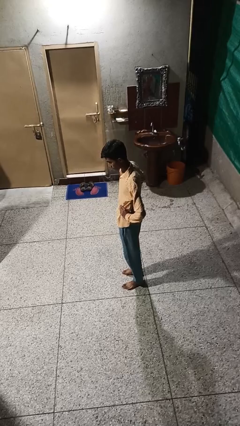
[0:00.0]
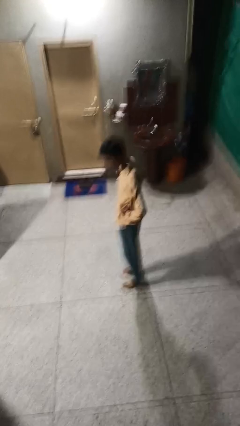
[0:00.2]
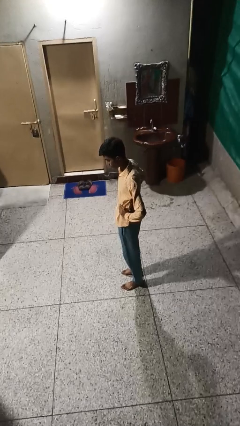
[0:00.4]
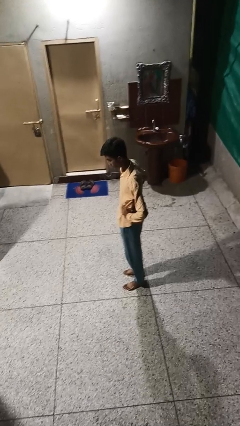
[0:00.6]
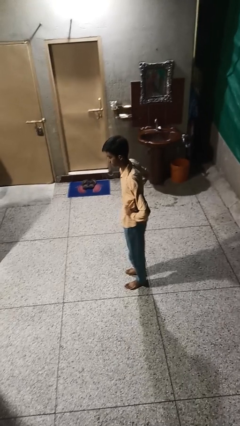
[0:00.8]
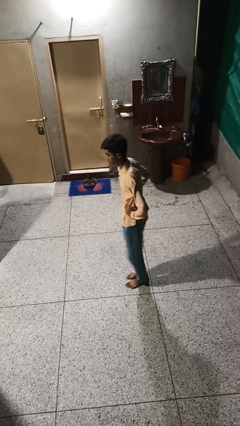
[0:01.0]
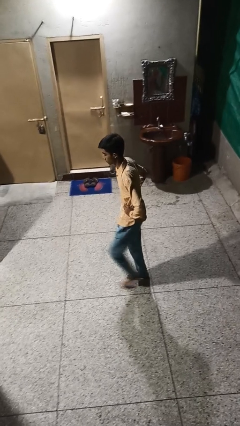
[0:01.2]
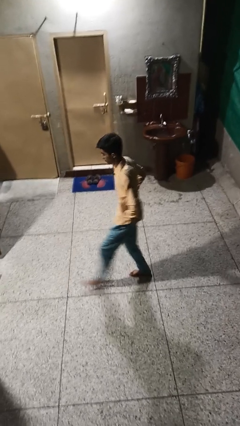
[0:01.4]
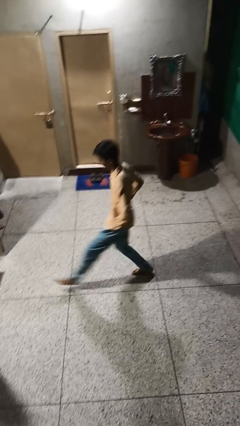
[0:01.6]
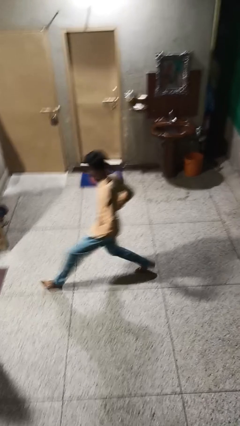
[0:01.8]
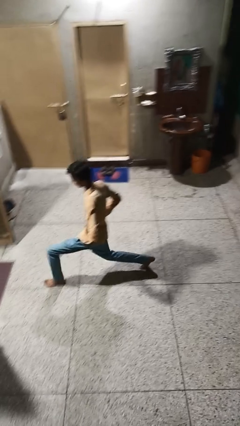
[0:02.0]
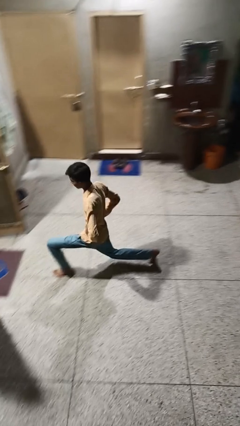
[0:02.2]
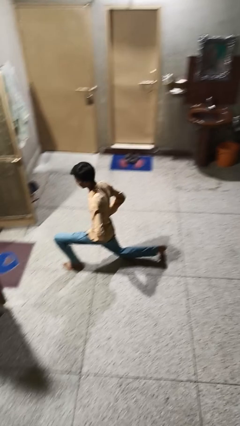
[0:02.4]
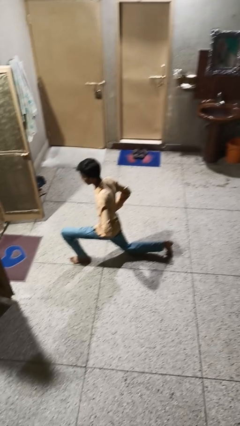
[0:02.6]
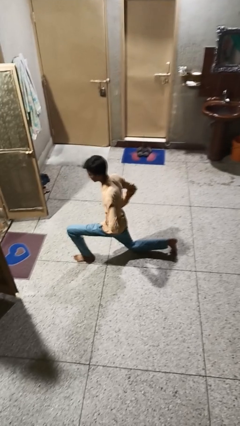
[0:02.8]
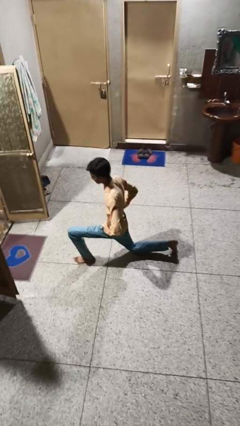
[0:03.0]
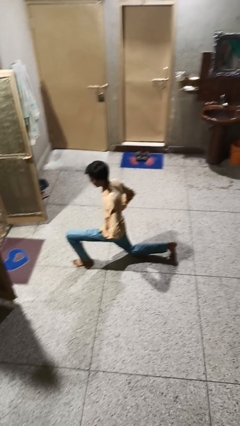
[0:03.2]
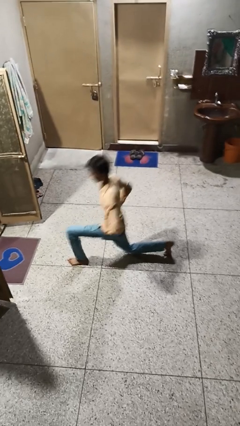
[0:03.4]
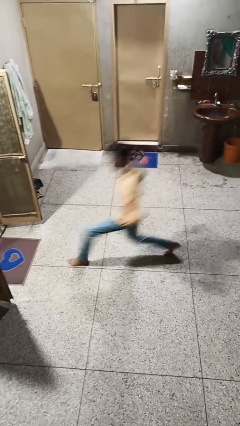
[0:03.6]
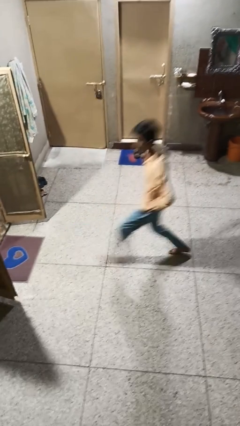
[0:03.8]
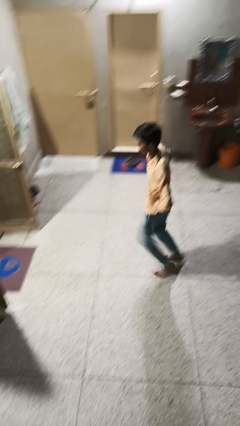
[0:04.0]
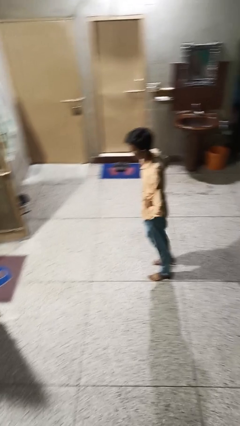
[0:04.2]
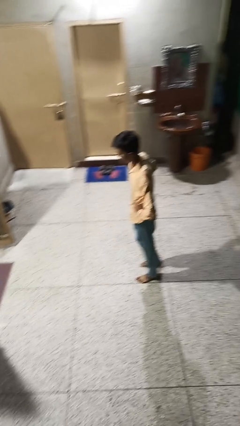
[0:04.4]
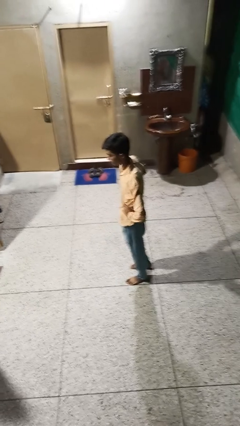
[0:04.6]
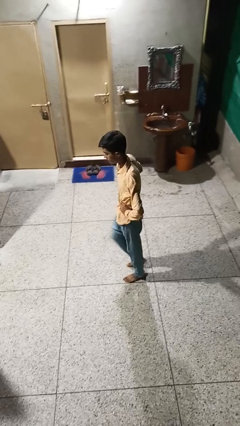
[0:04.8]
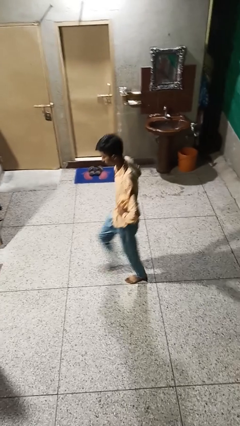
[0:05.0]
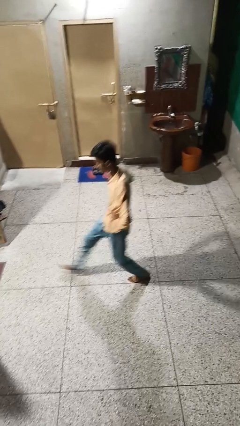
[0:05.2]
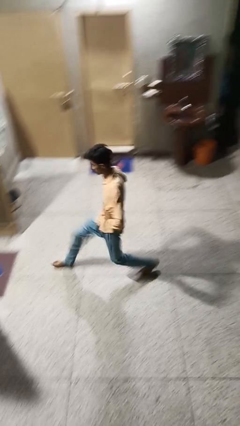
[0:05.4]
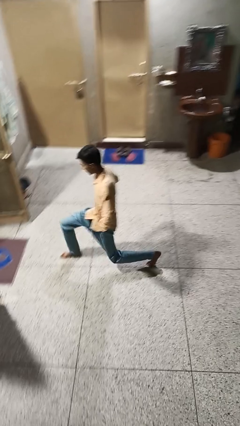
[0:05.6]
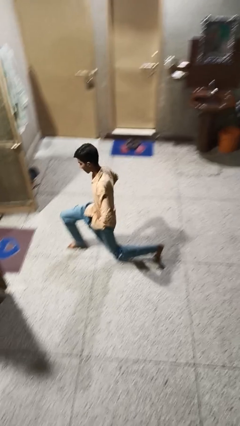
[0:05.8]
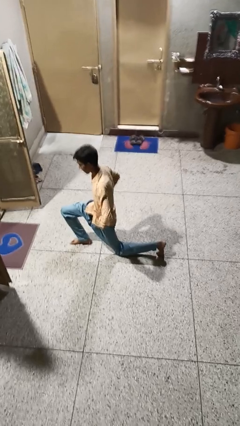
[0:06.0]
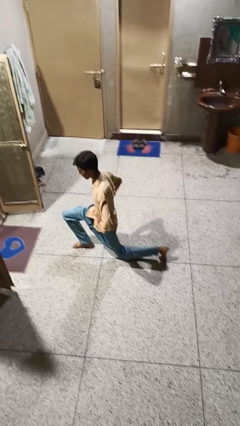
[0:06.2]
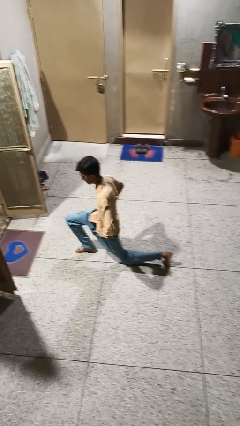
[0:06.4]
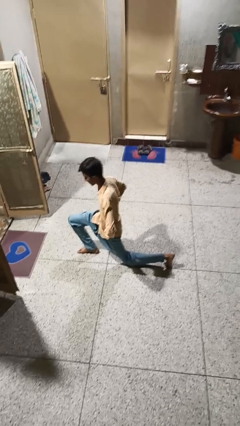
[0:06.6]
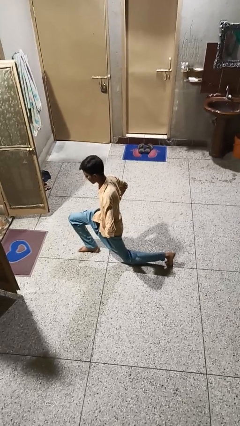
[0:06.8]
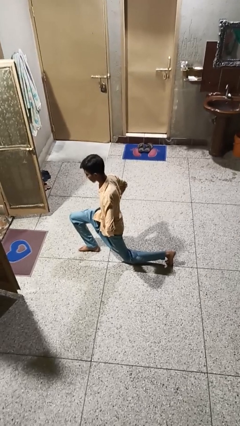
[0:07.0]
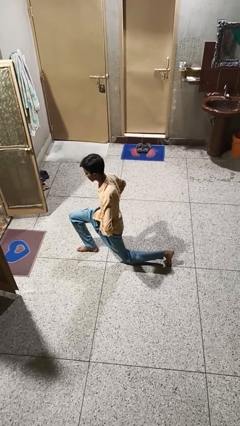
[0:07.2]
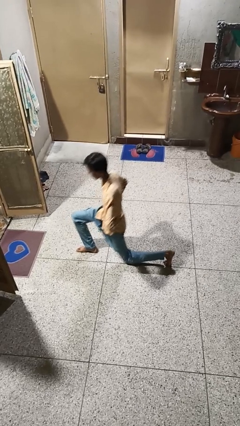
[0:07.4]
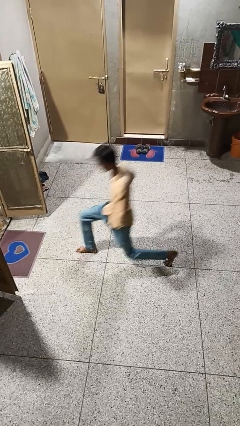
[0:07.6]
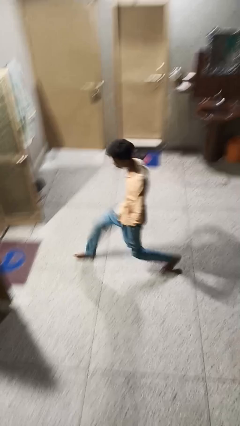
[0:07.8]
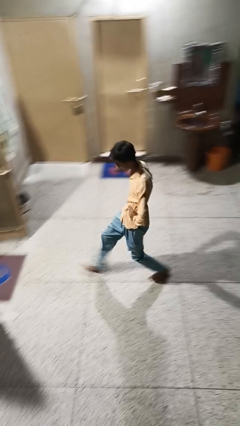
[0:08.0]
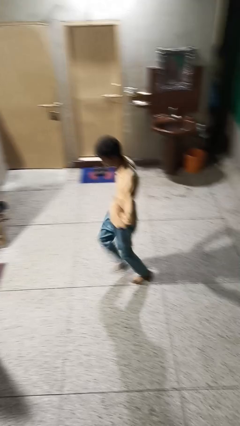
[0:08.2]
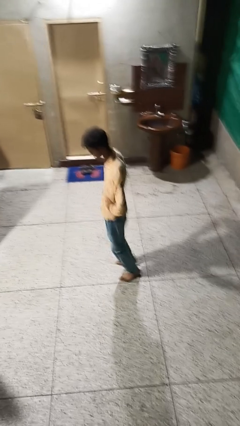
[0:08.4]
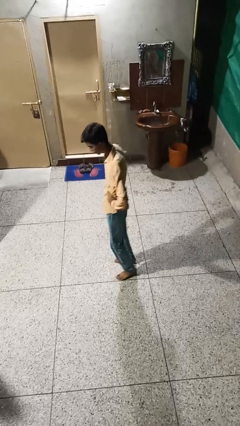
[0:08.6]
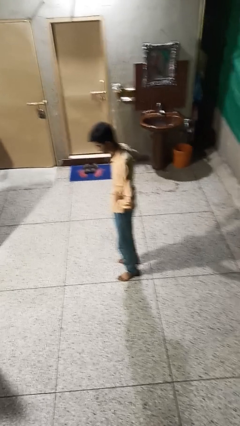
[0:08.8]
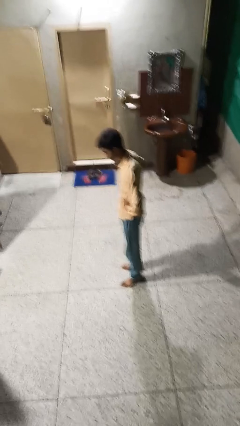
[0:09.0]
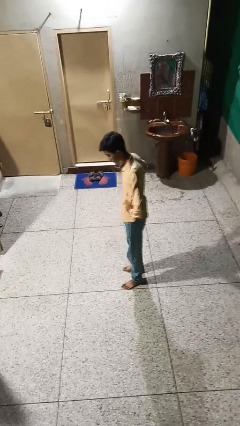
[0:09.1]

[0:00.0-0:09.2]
person exercises with lunges

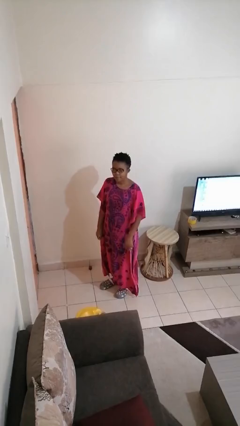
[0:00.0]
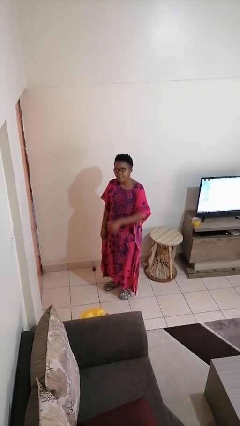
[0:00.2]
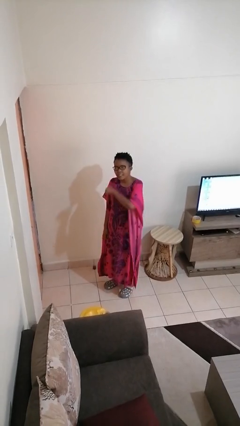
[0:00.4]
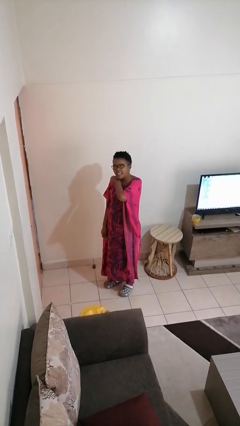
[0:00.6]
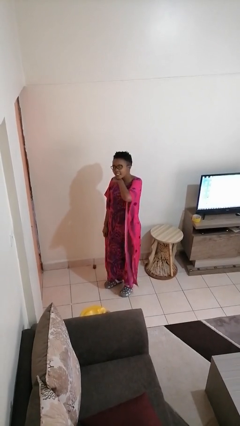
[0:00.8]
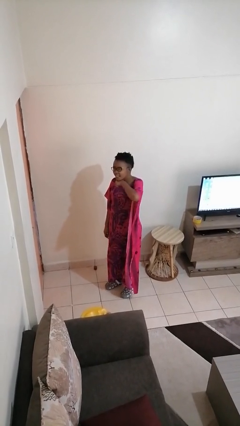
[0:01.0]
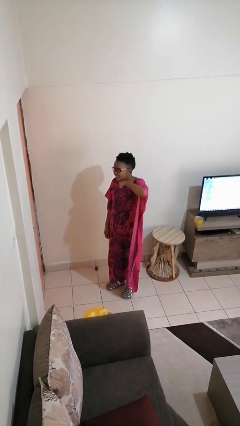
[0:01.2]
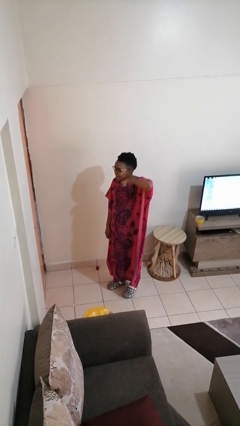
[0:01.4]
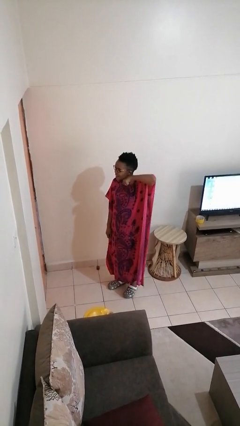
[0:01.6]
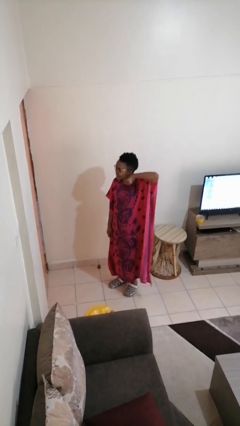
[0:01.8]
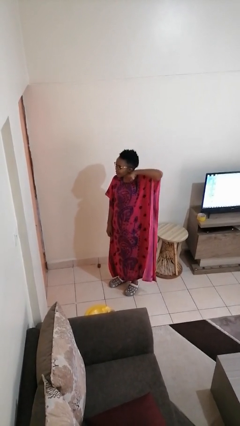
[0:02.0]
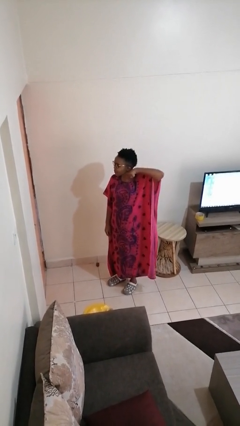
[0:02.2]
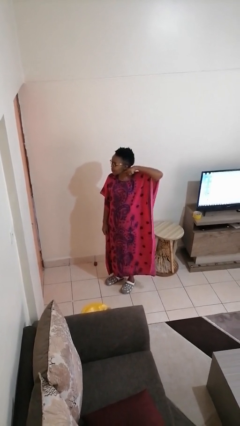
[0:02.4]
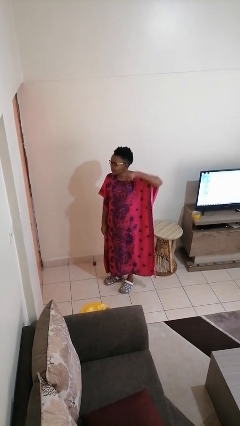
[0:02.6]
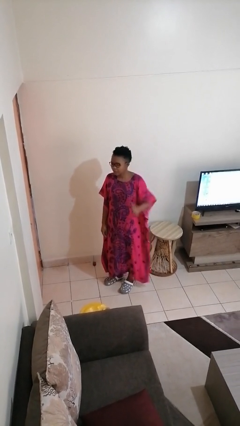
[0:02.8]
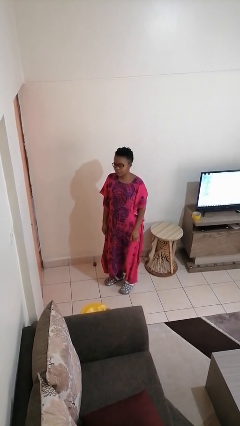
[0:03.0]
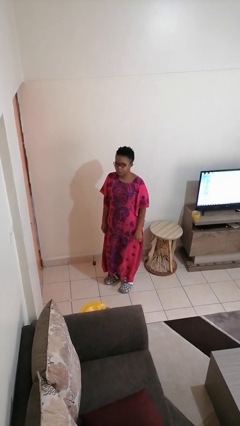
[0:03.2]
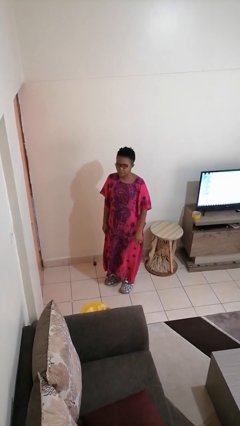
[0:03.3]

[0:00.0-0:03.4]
person gestures cut

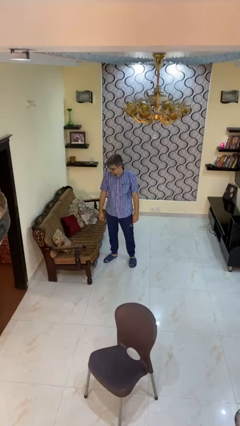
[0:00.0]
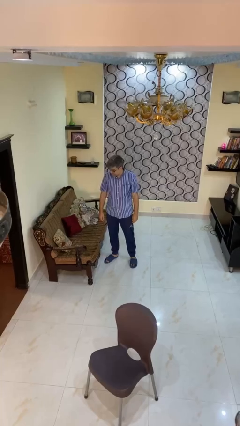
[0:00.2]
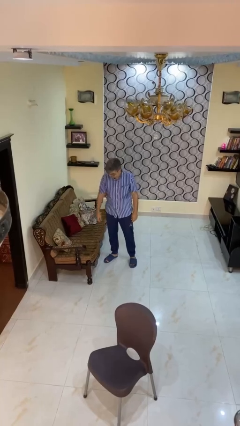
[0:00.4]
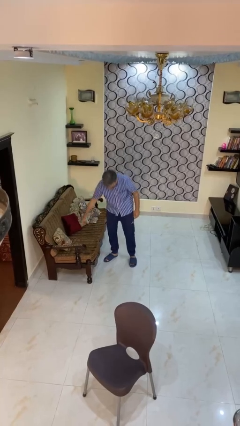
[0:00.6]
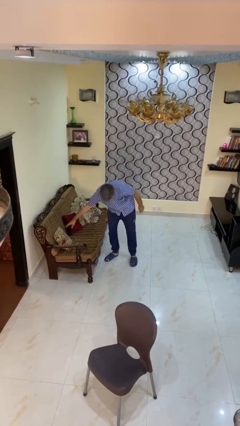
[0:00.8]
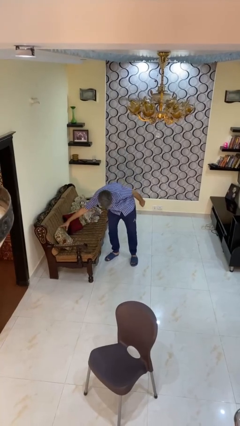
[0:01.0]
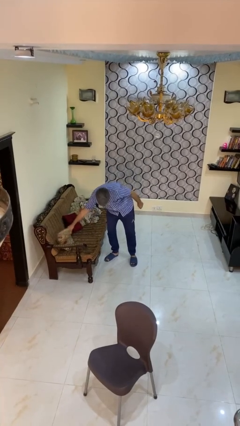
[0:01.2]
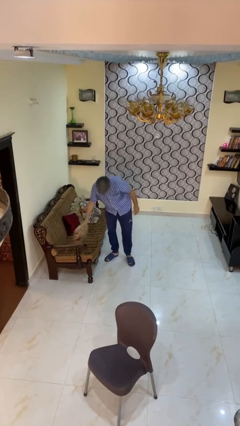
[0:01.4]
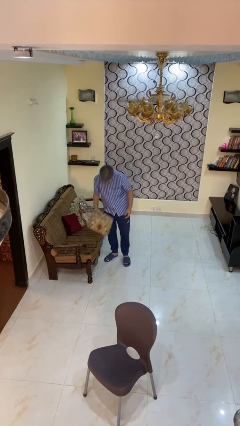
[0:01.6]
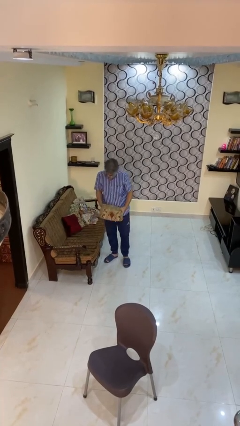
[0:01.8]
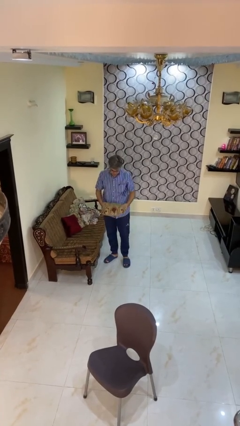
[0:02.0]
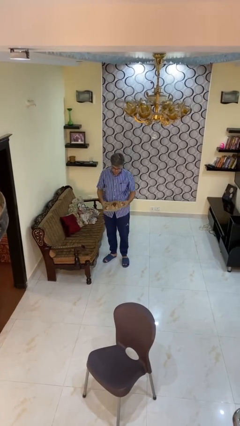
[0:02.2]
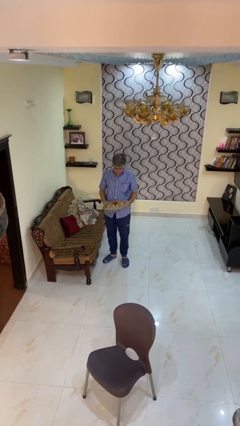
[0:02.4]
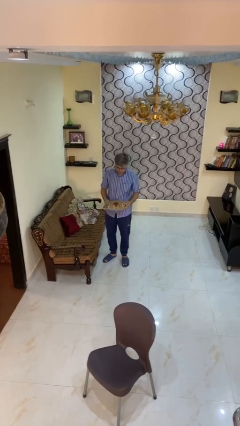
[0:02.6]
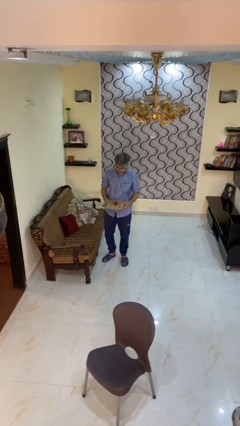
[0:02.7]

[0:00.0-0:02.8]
person picks up object from couch

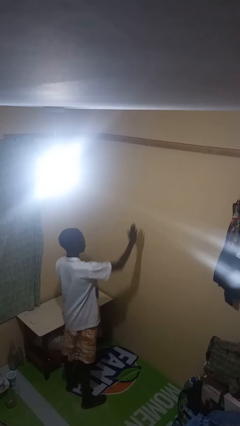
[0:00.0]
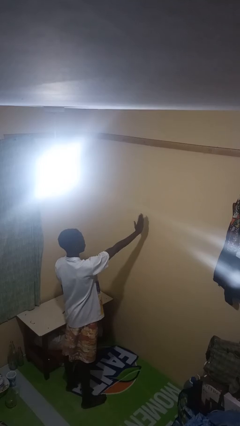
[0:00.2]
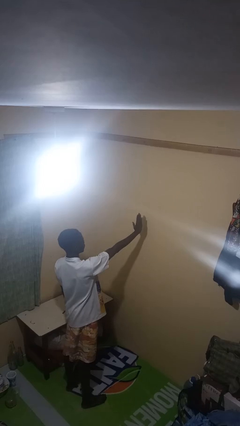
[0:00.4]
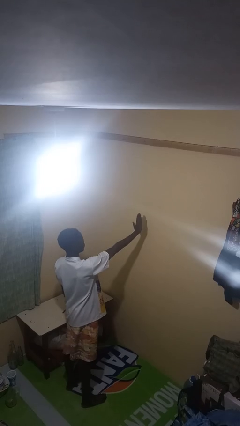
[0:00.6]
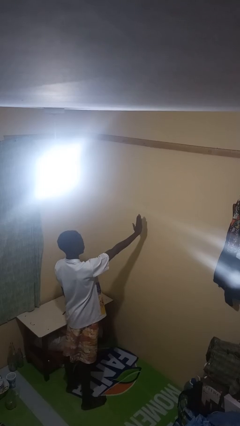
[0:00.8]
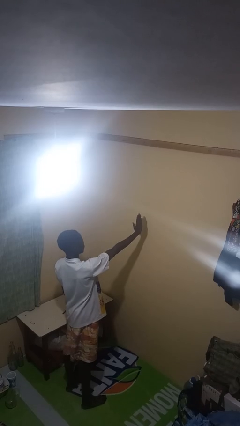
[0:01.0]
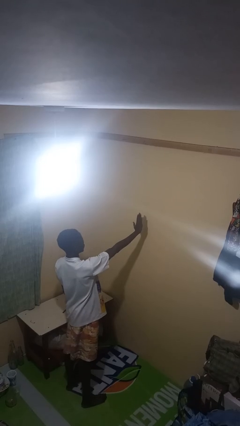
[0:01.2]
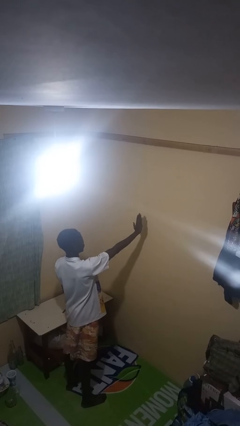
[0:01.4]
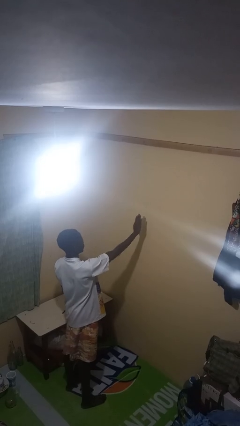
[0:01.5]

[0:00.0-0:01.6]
person gestures stop

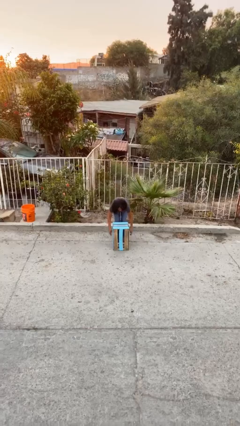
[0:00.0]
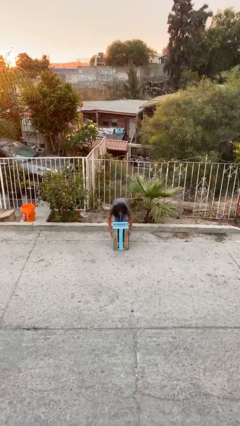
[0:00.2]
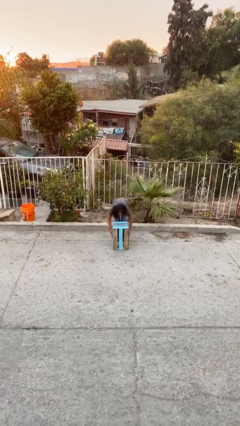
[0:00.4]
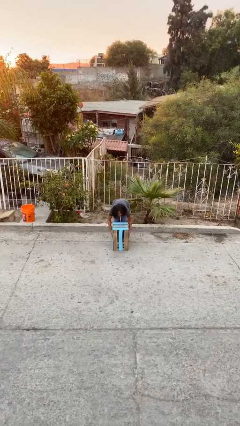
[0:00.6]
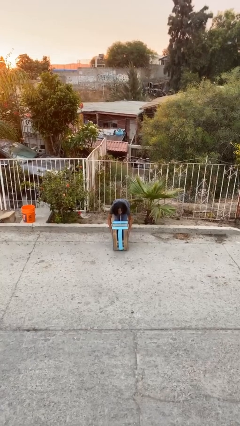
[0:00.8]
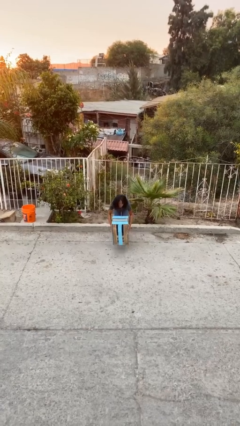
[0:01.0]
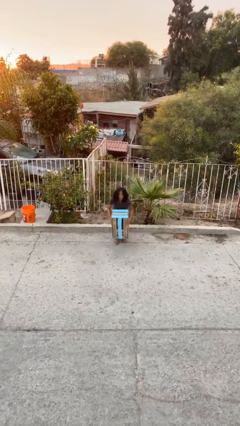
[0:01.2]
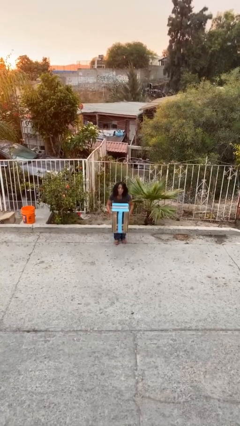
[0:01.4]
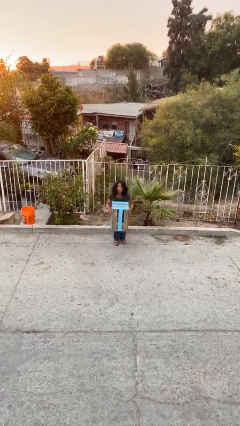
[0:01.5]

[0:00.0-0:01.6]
person picks up object from floor
